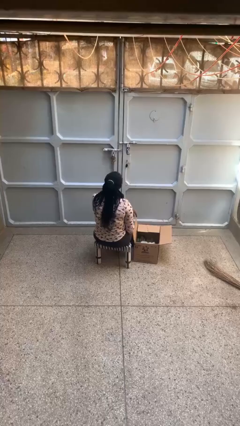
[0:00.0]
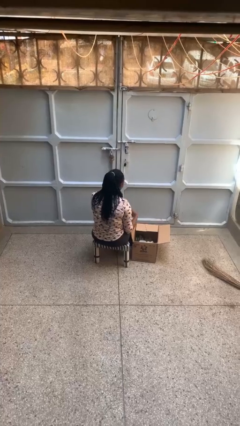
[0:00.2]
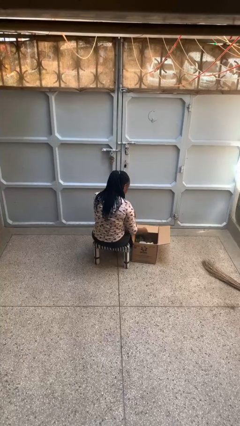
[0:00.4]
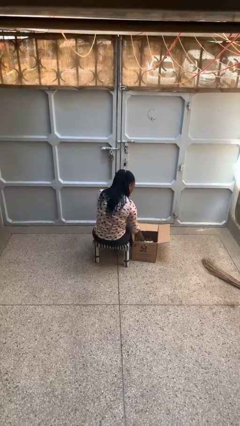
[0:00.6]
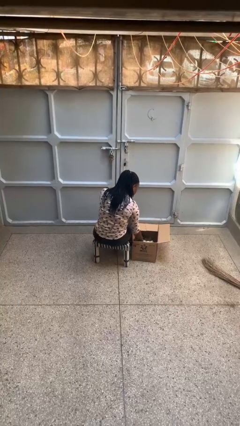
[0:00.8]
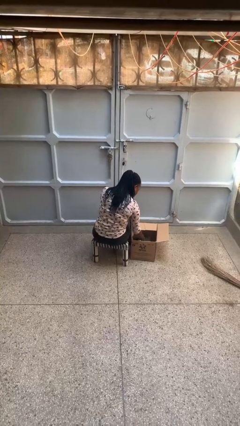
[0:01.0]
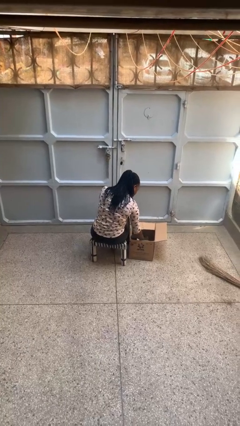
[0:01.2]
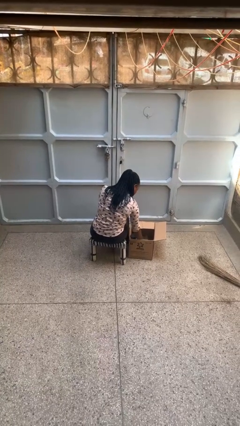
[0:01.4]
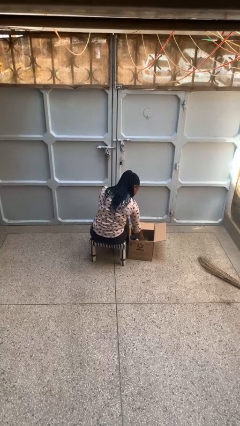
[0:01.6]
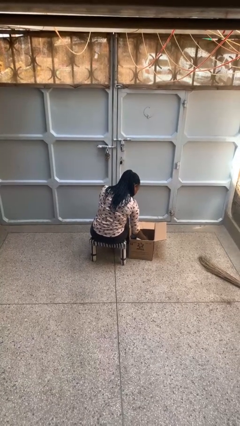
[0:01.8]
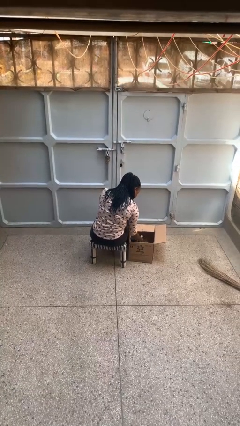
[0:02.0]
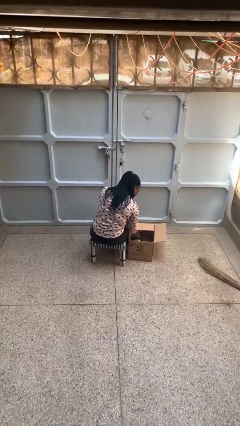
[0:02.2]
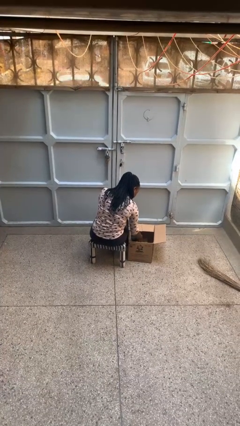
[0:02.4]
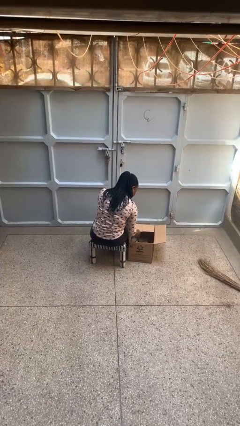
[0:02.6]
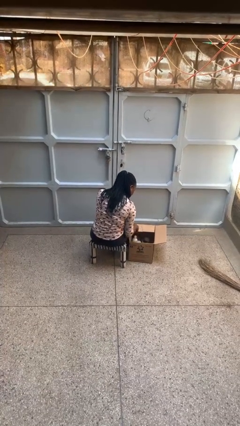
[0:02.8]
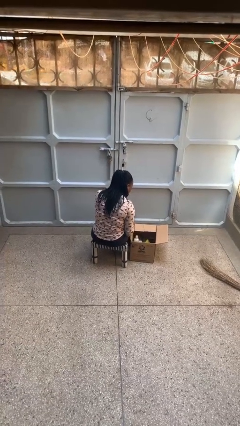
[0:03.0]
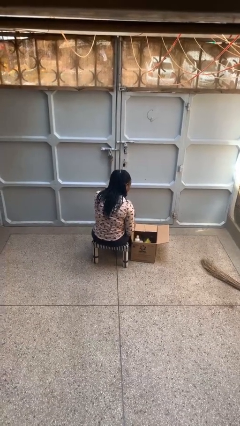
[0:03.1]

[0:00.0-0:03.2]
person searches in box

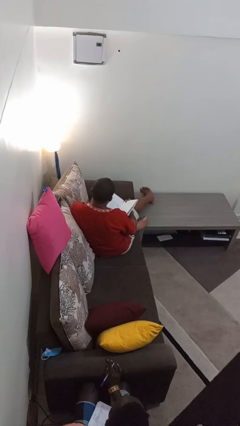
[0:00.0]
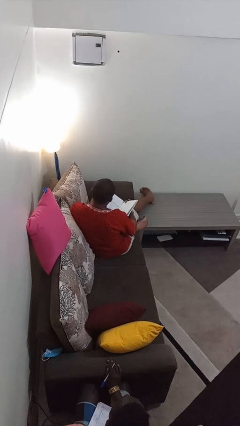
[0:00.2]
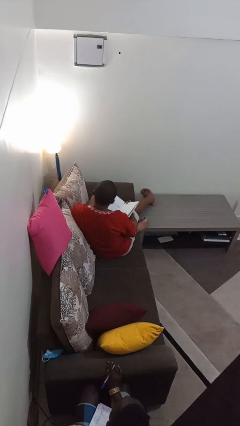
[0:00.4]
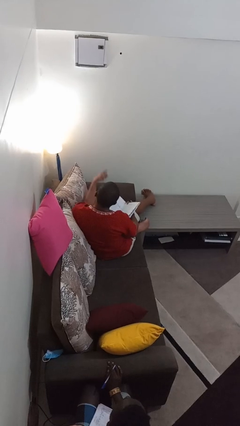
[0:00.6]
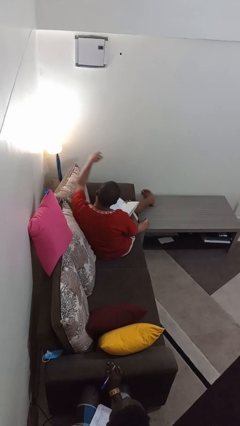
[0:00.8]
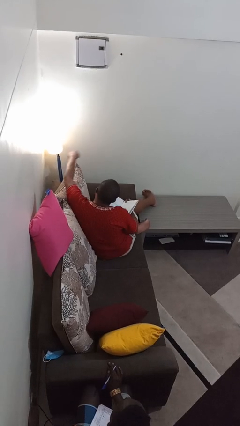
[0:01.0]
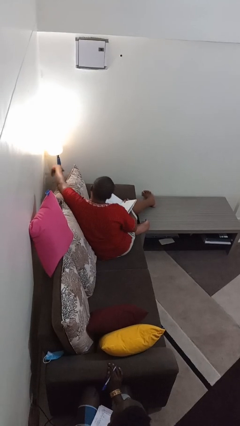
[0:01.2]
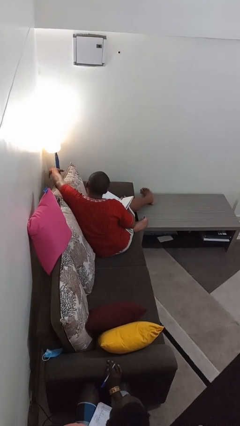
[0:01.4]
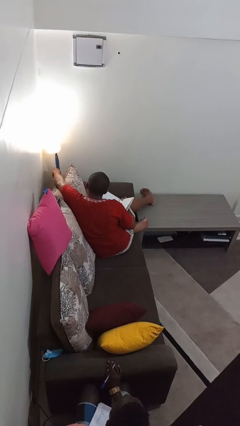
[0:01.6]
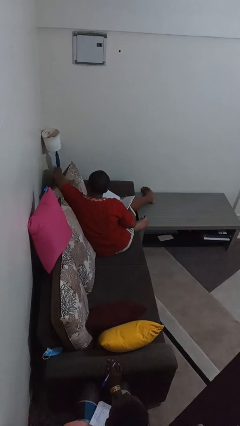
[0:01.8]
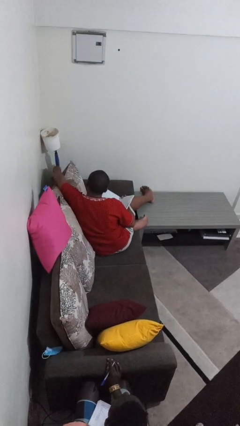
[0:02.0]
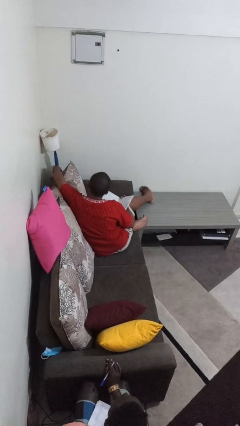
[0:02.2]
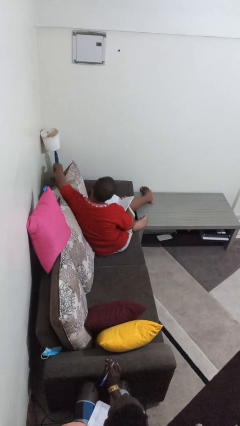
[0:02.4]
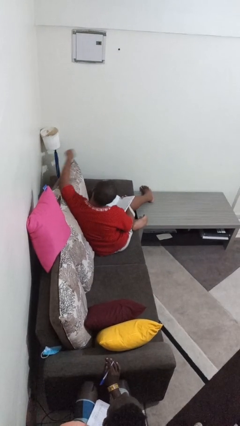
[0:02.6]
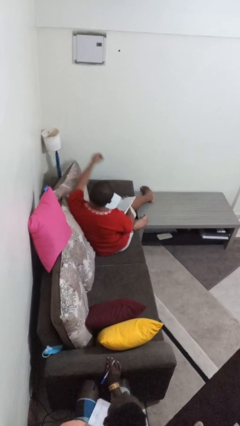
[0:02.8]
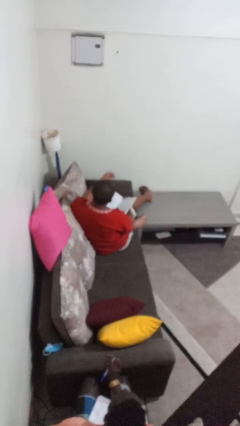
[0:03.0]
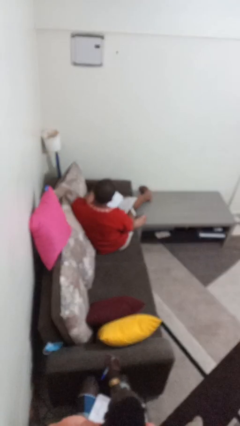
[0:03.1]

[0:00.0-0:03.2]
person turns off lamp

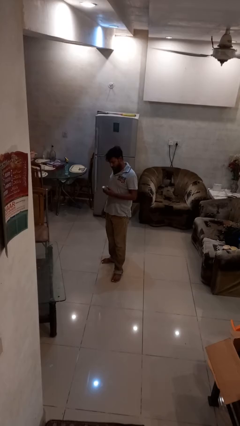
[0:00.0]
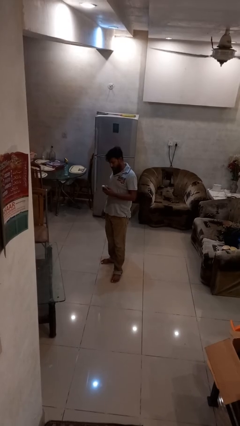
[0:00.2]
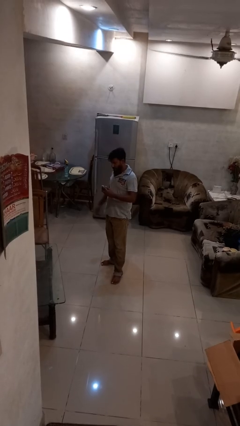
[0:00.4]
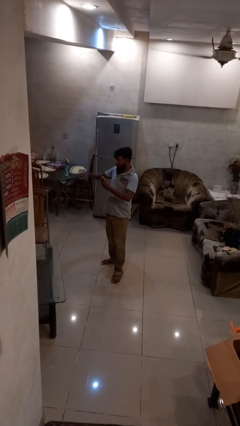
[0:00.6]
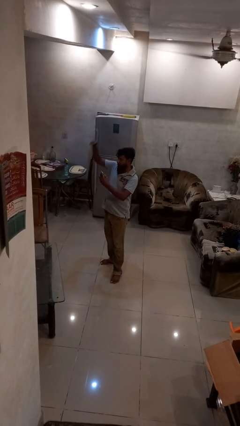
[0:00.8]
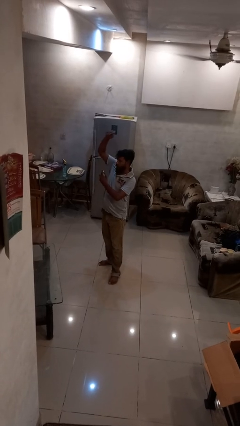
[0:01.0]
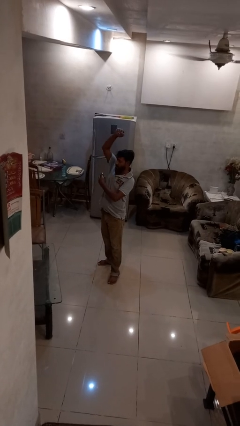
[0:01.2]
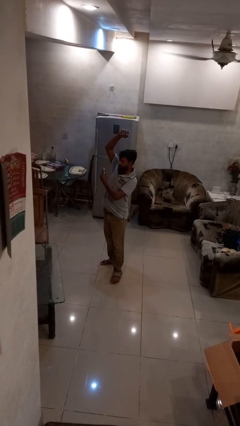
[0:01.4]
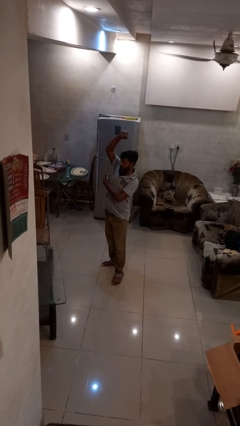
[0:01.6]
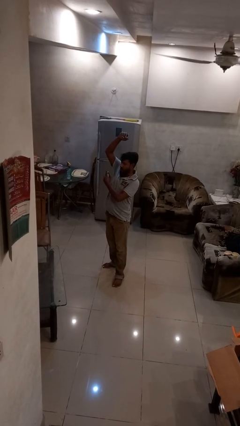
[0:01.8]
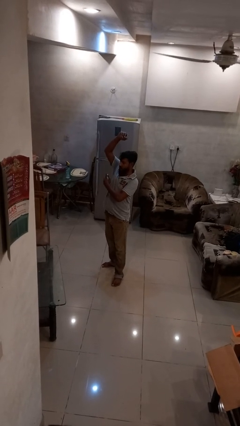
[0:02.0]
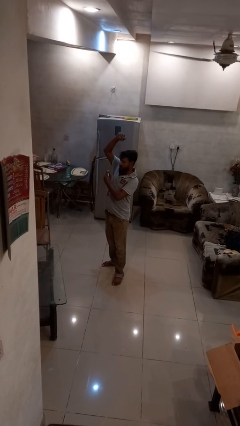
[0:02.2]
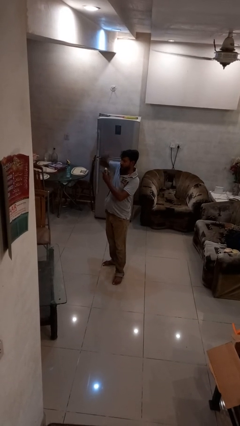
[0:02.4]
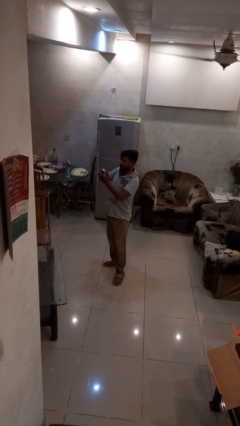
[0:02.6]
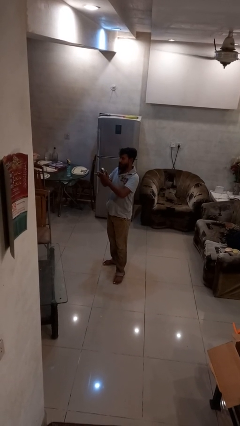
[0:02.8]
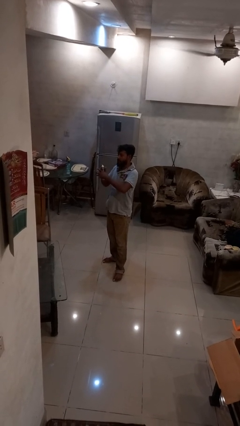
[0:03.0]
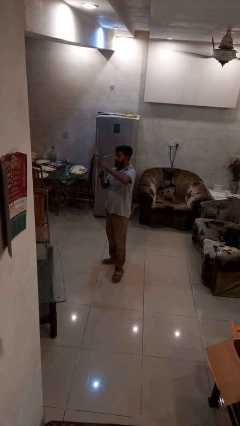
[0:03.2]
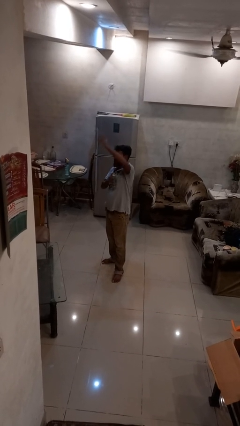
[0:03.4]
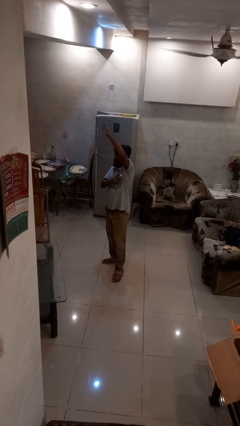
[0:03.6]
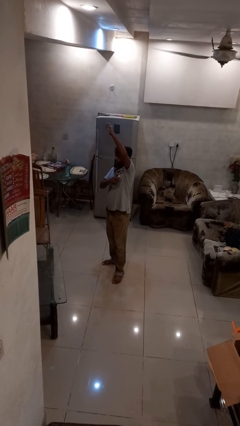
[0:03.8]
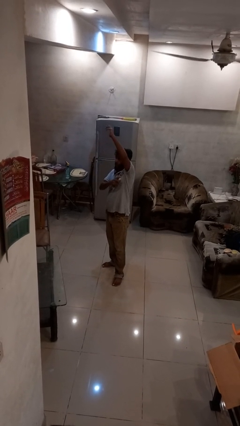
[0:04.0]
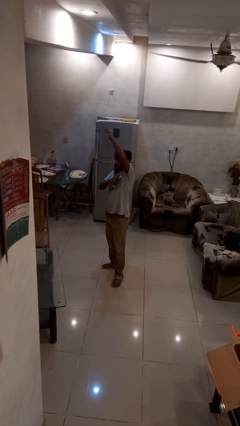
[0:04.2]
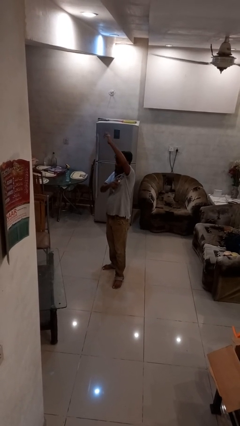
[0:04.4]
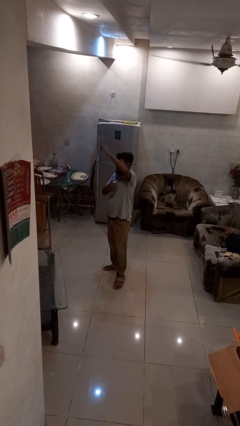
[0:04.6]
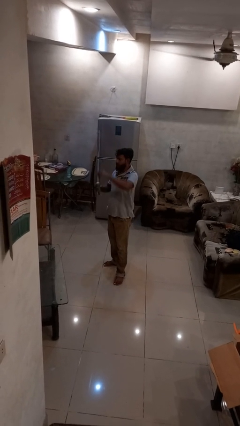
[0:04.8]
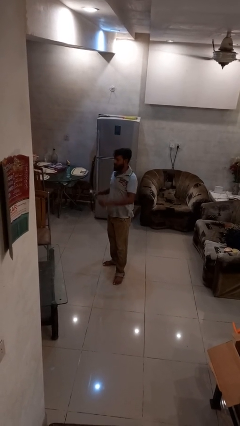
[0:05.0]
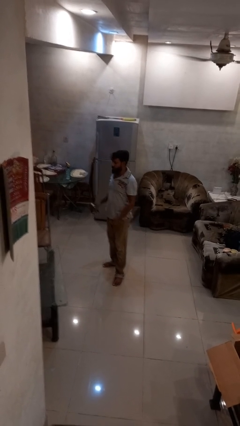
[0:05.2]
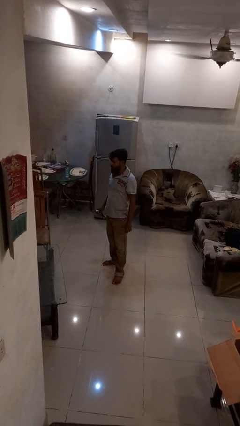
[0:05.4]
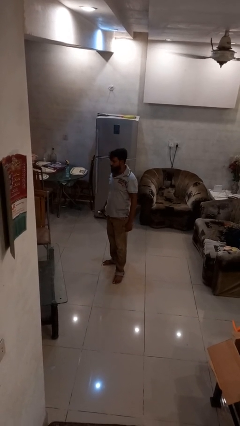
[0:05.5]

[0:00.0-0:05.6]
person applies deodorant

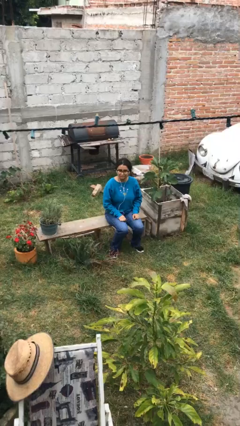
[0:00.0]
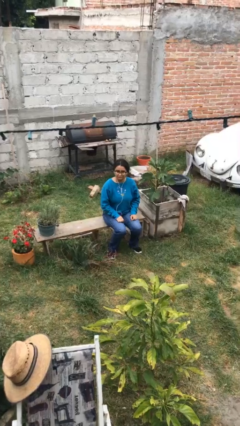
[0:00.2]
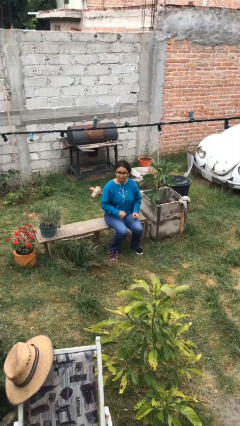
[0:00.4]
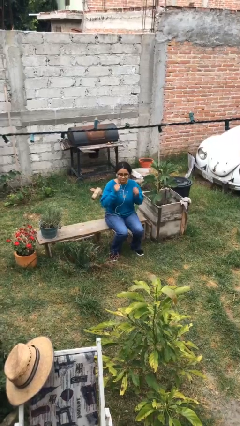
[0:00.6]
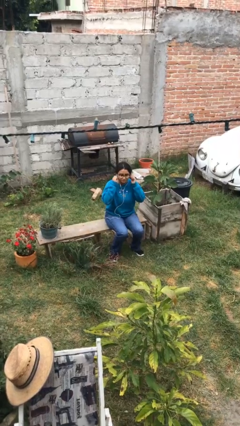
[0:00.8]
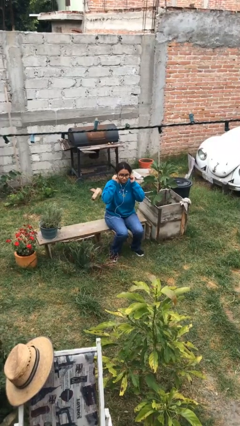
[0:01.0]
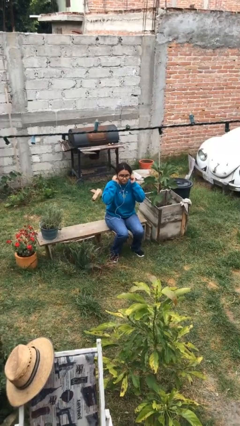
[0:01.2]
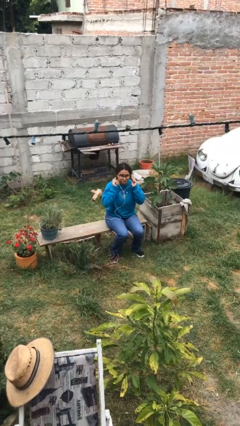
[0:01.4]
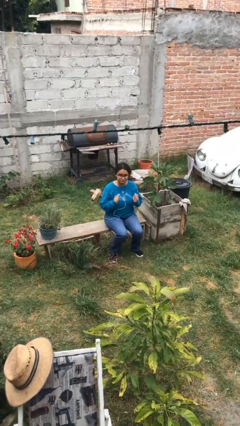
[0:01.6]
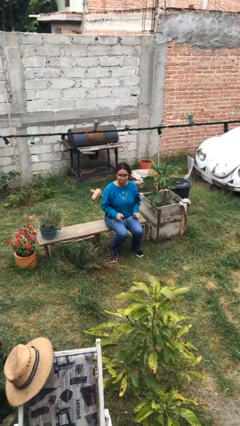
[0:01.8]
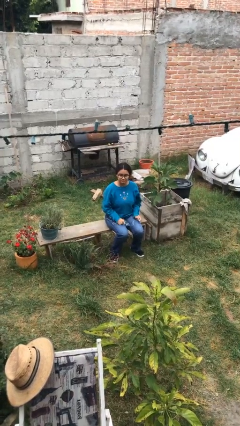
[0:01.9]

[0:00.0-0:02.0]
person takes off headphones

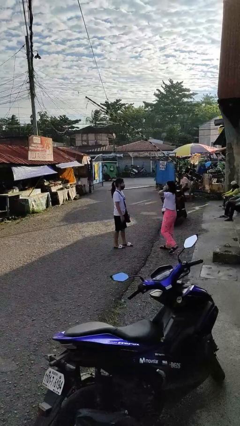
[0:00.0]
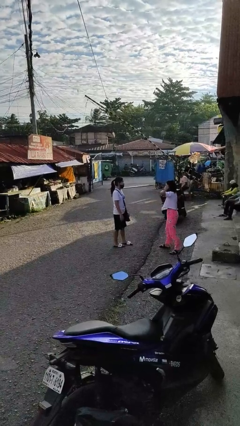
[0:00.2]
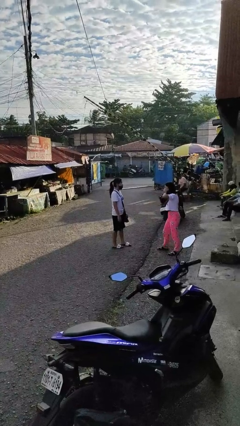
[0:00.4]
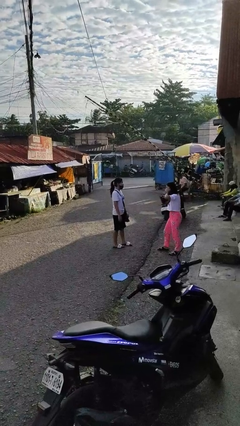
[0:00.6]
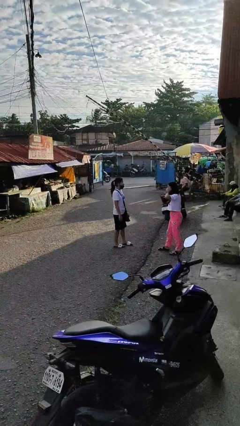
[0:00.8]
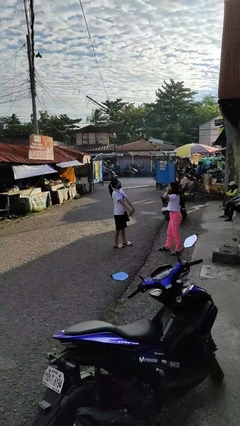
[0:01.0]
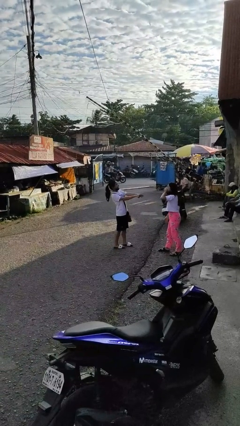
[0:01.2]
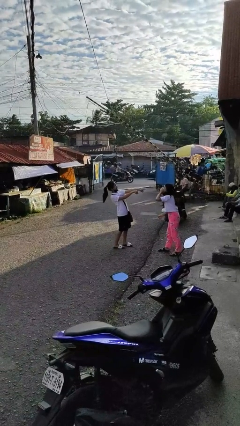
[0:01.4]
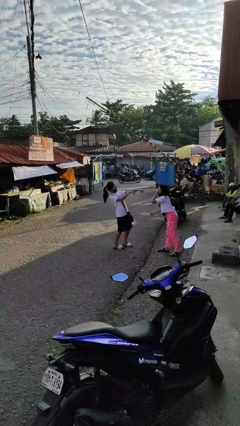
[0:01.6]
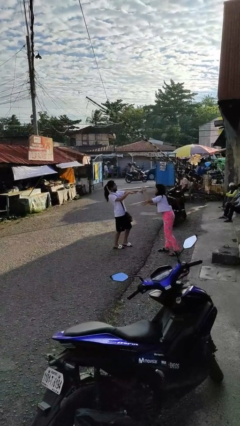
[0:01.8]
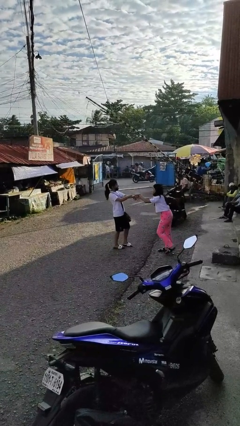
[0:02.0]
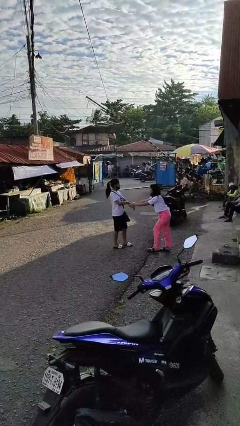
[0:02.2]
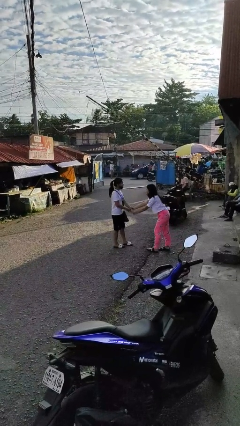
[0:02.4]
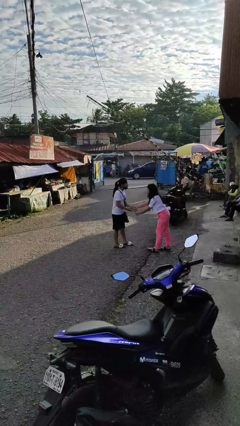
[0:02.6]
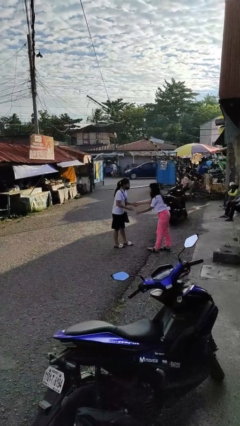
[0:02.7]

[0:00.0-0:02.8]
person laughs with person

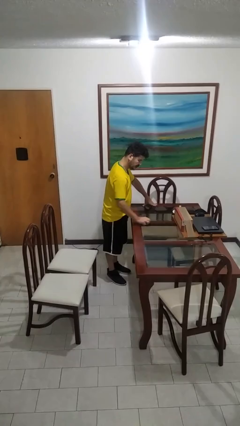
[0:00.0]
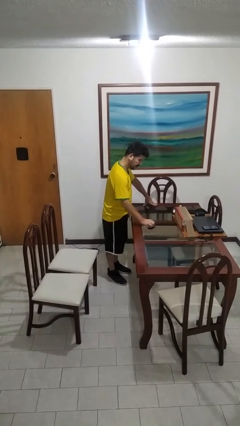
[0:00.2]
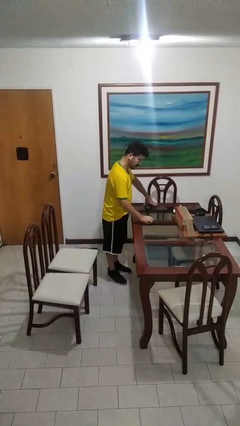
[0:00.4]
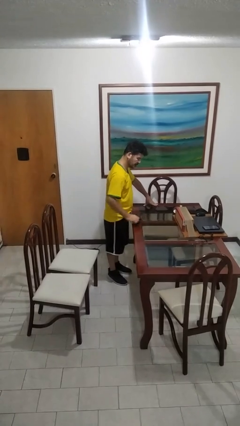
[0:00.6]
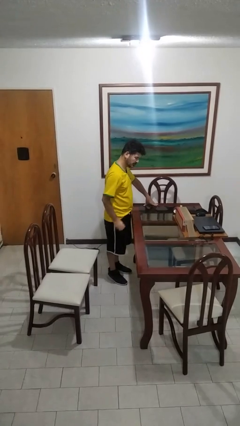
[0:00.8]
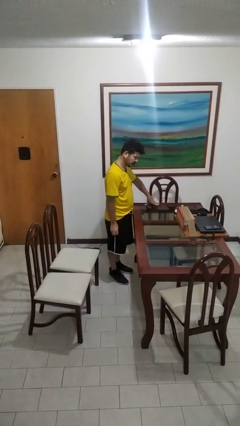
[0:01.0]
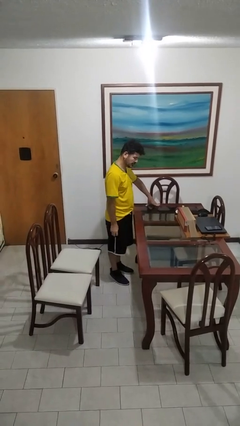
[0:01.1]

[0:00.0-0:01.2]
person cleans table with rag
